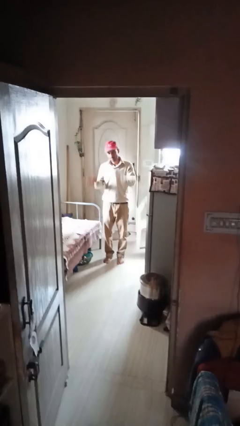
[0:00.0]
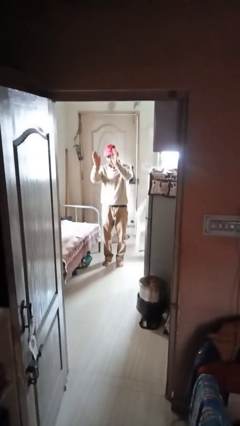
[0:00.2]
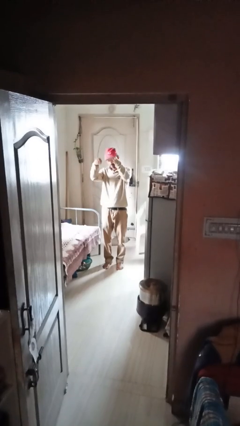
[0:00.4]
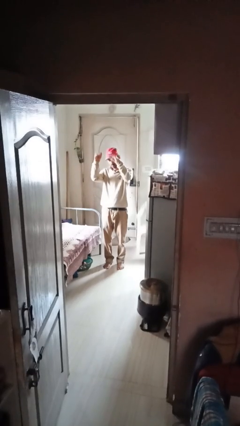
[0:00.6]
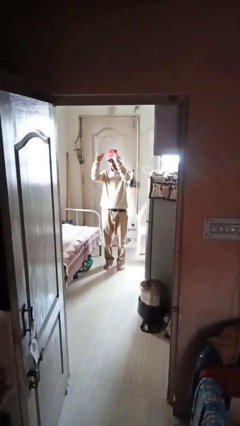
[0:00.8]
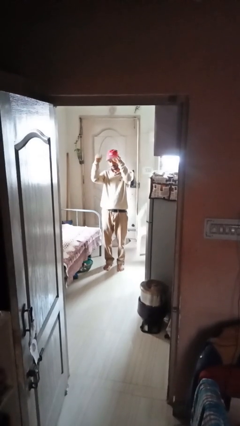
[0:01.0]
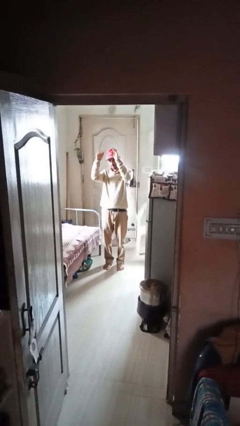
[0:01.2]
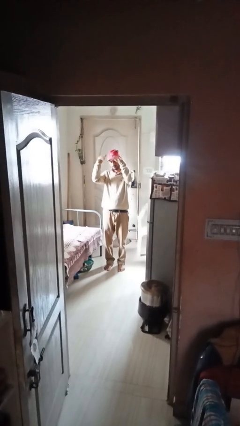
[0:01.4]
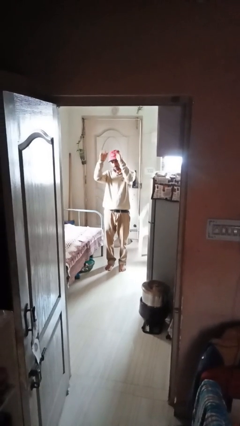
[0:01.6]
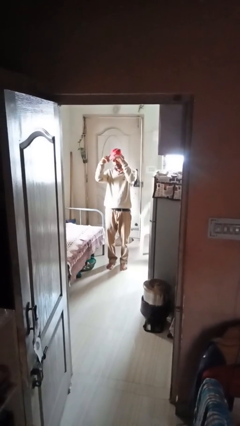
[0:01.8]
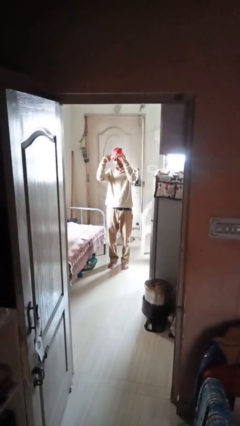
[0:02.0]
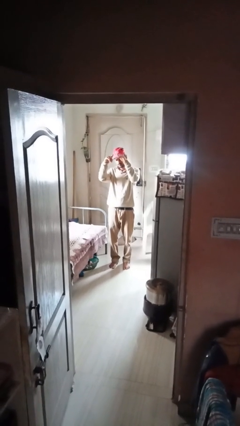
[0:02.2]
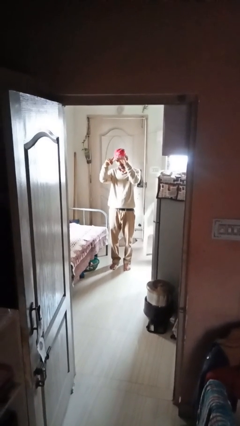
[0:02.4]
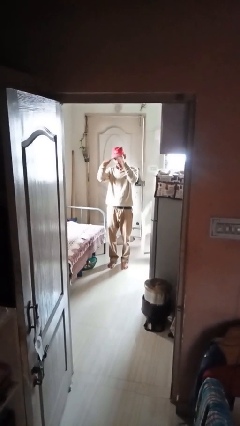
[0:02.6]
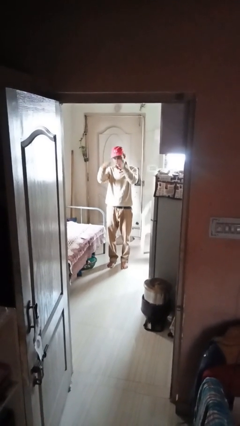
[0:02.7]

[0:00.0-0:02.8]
person gestures come here

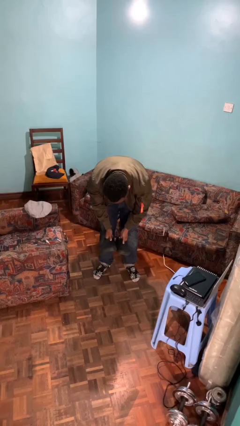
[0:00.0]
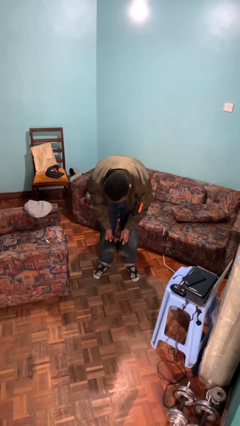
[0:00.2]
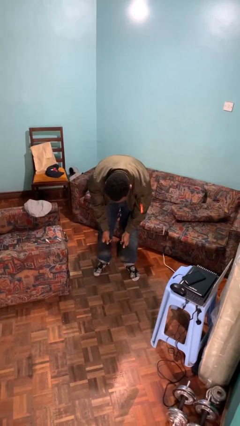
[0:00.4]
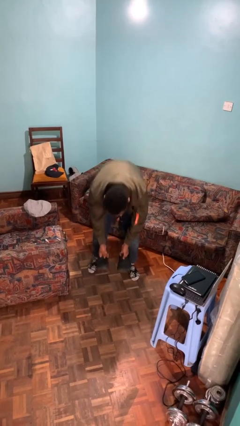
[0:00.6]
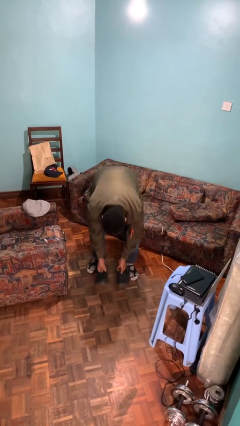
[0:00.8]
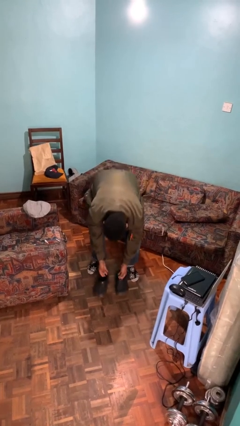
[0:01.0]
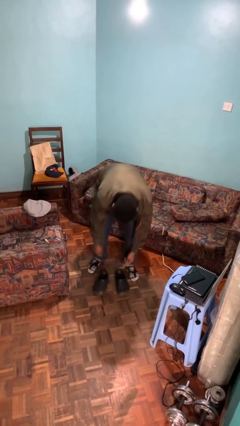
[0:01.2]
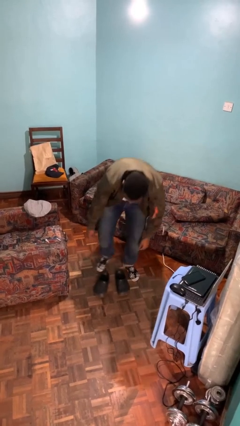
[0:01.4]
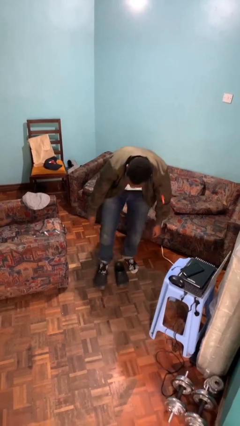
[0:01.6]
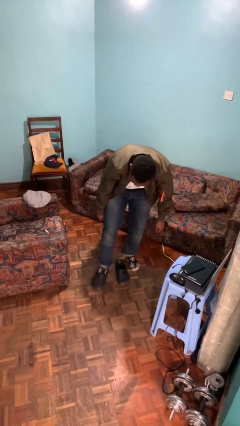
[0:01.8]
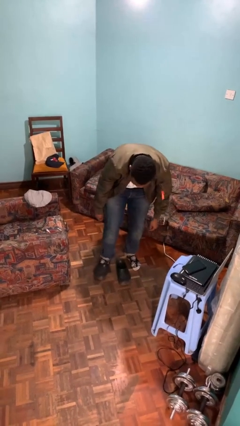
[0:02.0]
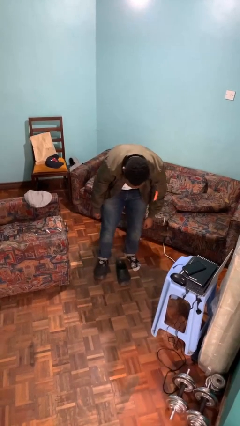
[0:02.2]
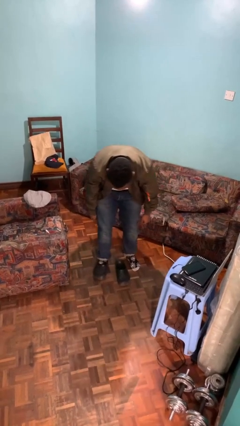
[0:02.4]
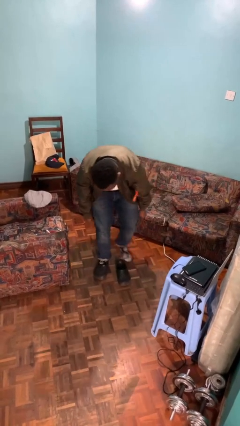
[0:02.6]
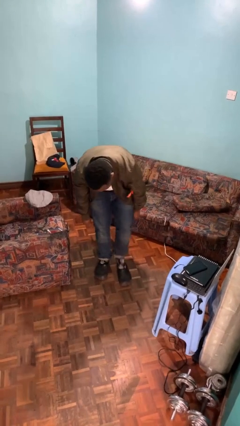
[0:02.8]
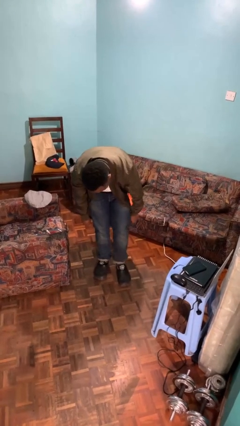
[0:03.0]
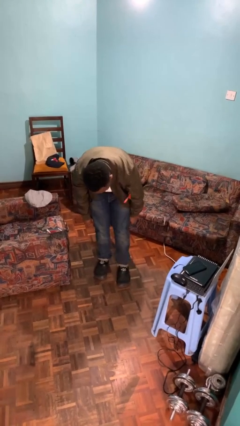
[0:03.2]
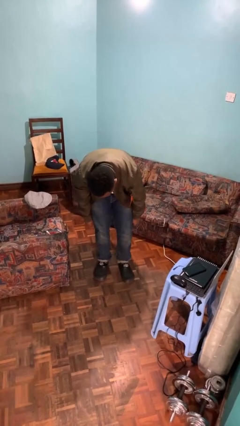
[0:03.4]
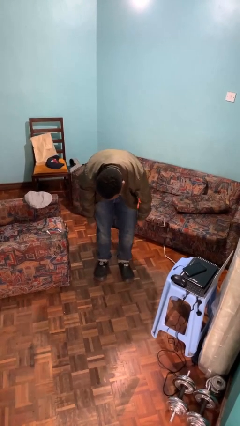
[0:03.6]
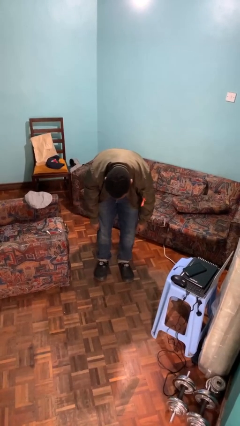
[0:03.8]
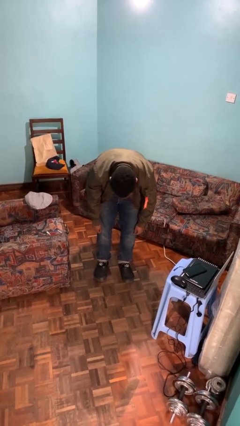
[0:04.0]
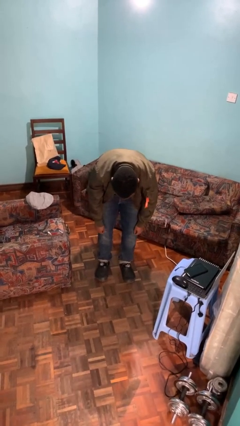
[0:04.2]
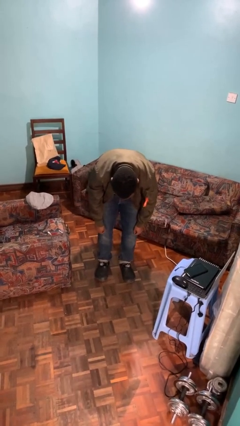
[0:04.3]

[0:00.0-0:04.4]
person puts on shoes

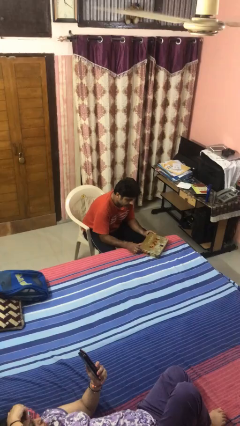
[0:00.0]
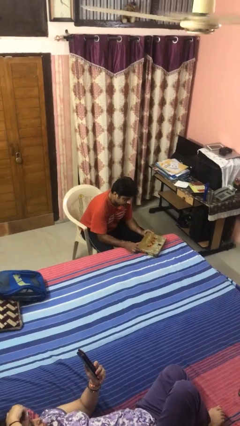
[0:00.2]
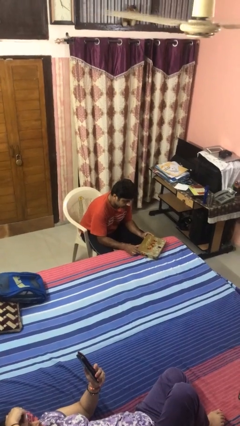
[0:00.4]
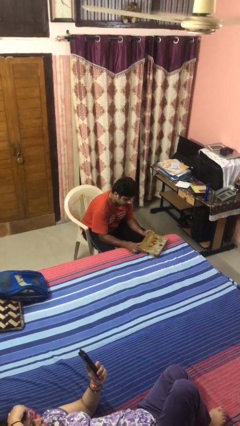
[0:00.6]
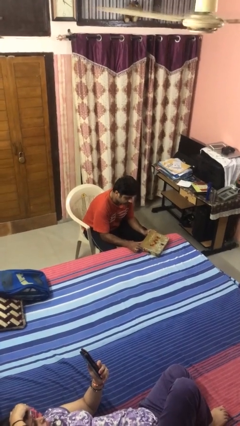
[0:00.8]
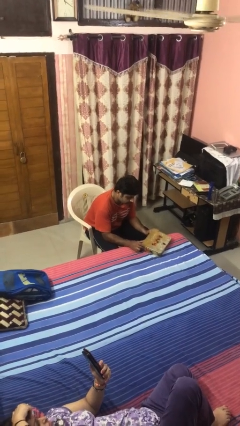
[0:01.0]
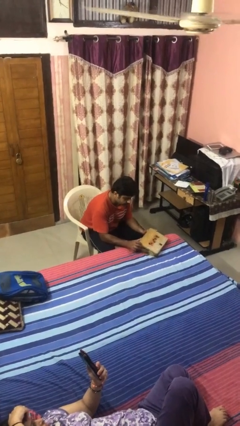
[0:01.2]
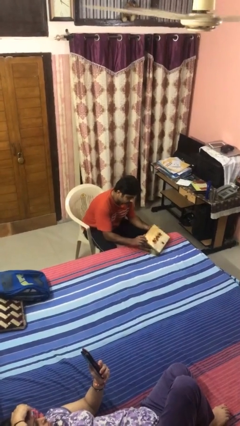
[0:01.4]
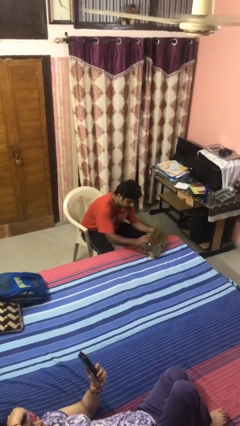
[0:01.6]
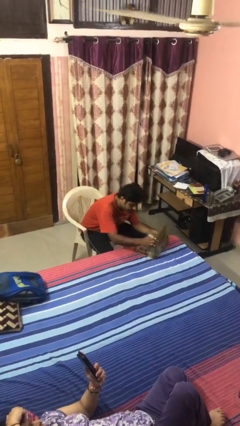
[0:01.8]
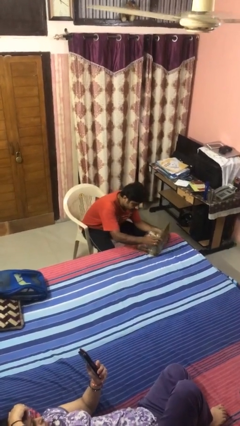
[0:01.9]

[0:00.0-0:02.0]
person opens jewelry box

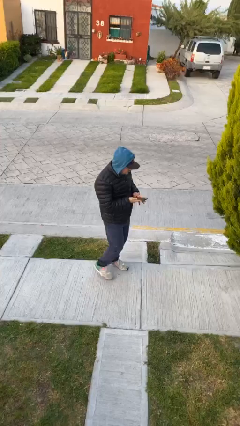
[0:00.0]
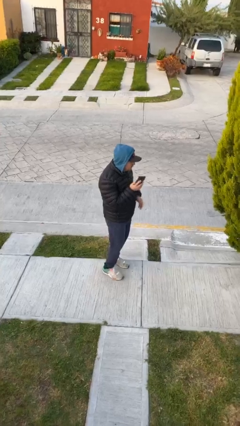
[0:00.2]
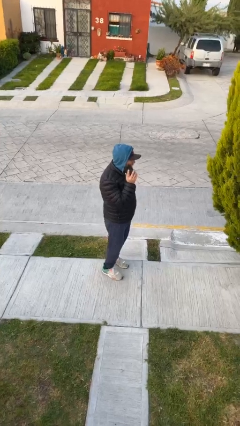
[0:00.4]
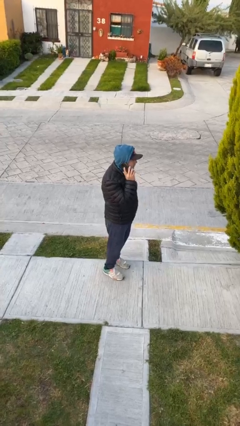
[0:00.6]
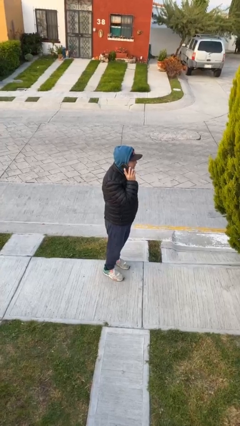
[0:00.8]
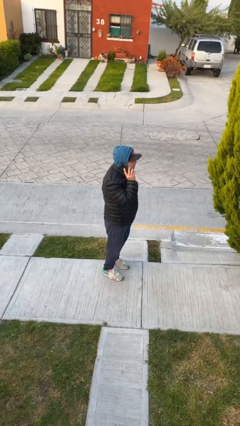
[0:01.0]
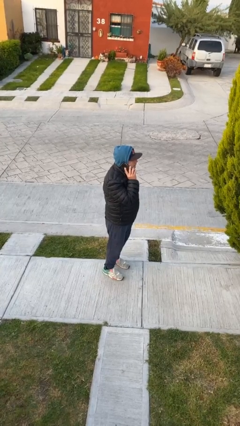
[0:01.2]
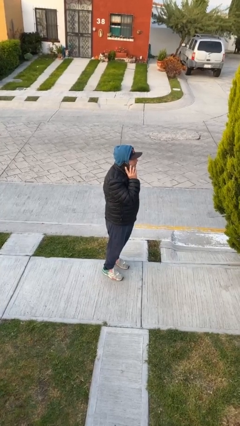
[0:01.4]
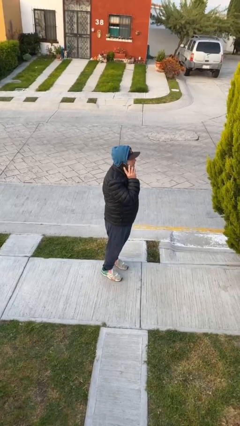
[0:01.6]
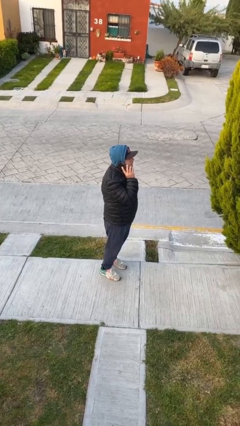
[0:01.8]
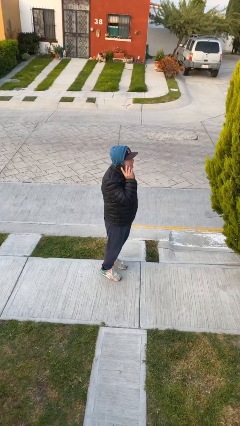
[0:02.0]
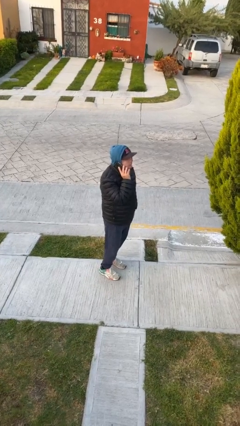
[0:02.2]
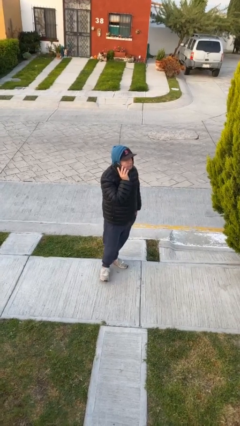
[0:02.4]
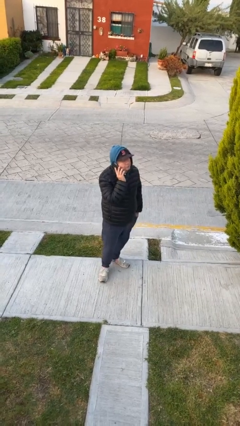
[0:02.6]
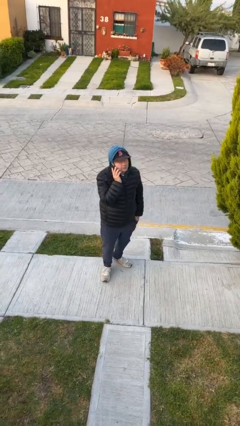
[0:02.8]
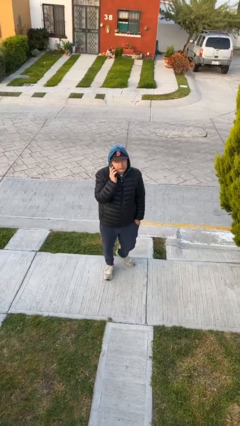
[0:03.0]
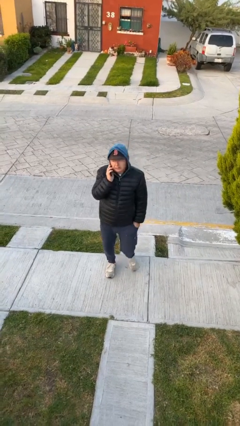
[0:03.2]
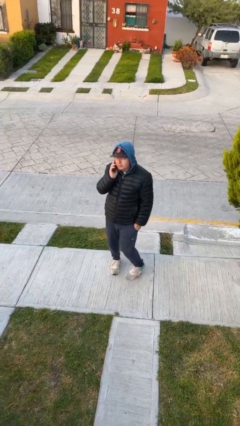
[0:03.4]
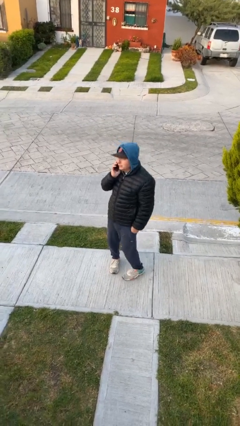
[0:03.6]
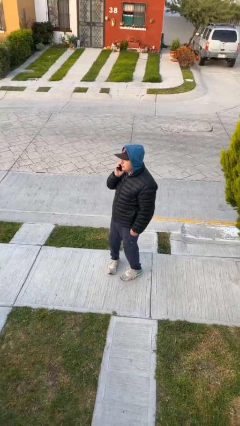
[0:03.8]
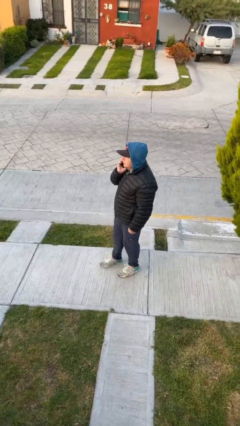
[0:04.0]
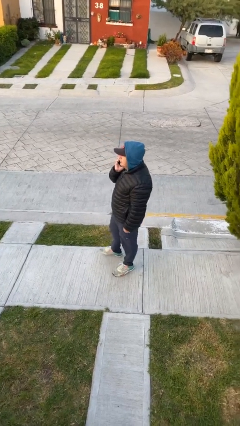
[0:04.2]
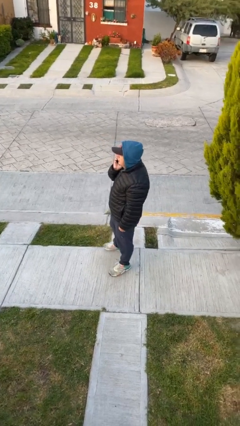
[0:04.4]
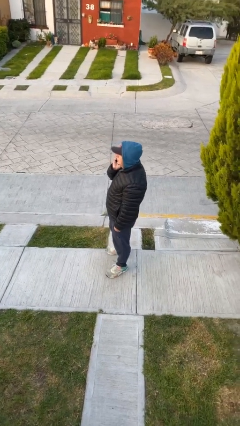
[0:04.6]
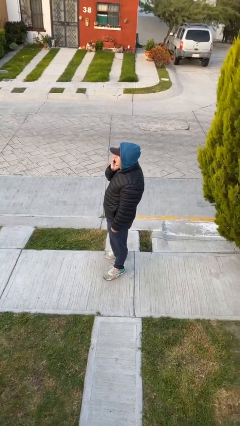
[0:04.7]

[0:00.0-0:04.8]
person talks on phone

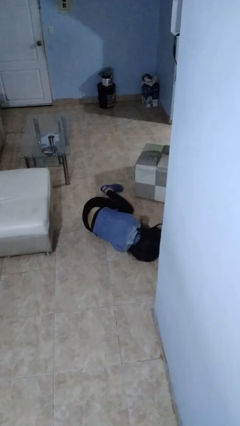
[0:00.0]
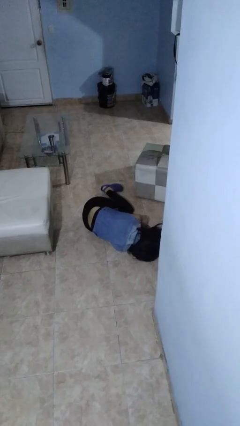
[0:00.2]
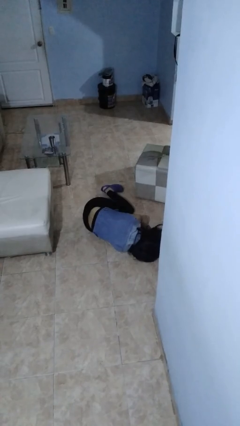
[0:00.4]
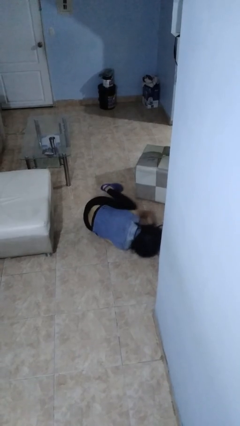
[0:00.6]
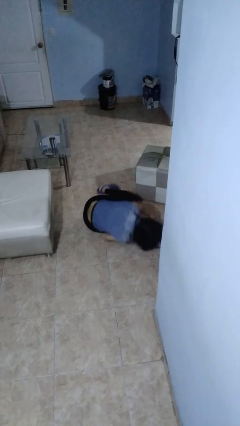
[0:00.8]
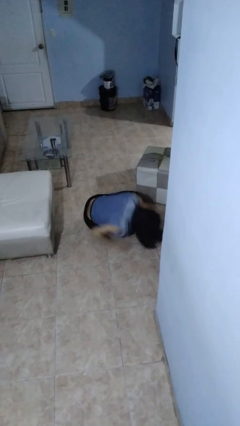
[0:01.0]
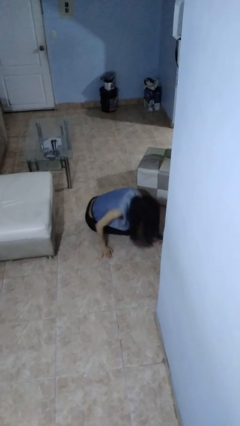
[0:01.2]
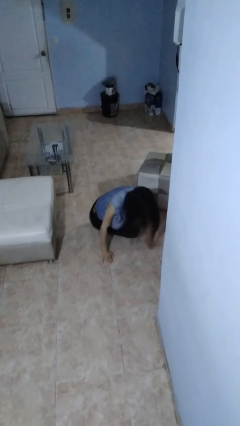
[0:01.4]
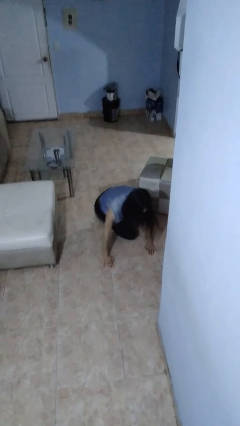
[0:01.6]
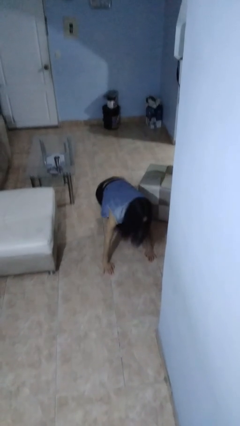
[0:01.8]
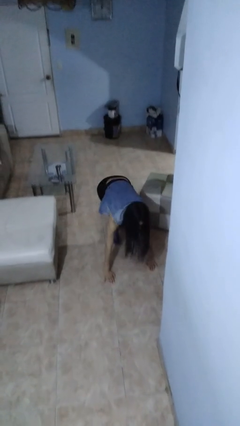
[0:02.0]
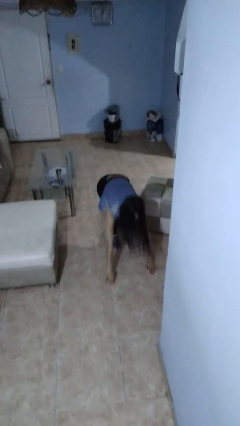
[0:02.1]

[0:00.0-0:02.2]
person stands up from floor

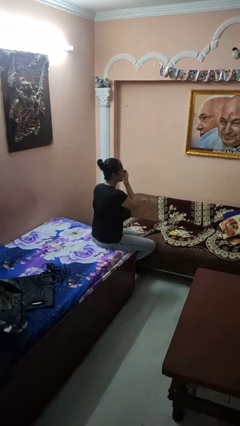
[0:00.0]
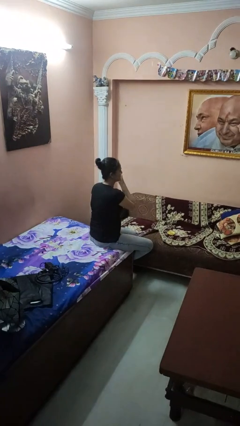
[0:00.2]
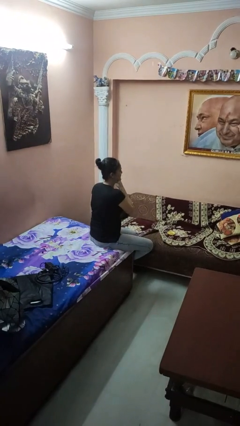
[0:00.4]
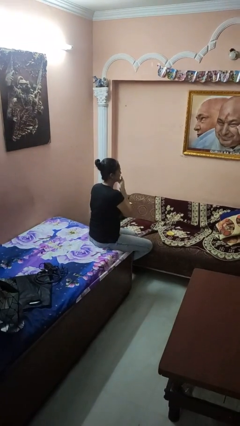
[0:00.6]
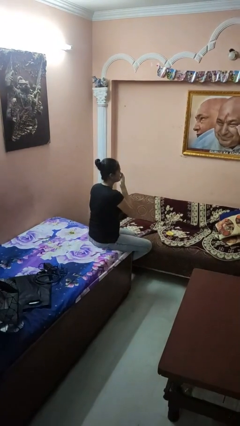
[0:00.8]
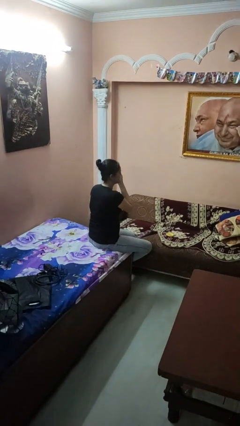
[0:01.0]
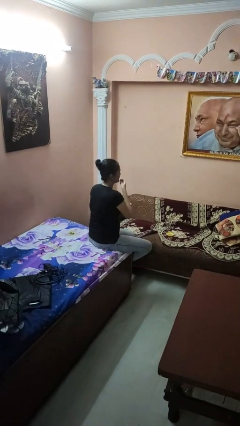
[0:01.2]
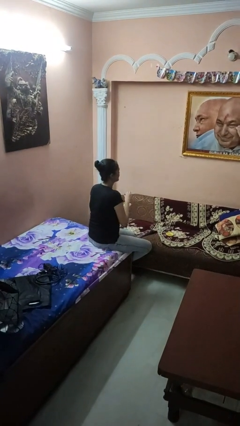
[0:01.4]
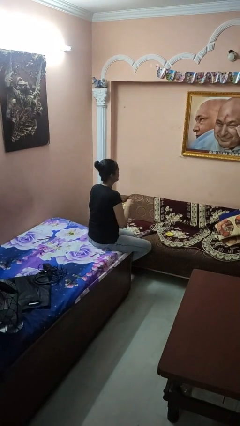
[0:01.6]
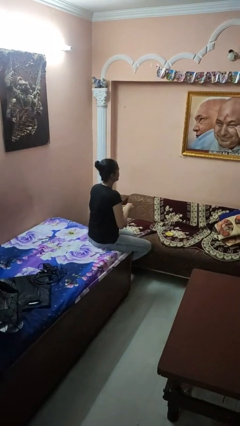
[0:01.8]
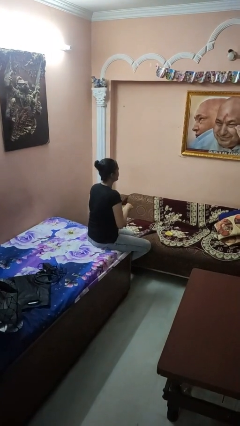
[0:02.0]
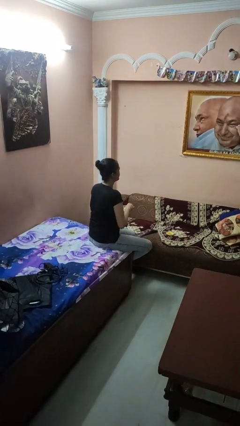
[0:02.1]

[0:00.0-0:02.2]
person applies foundation makeup
